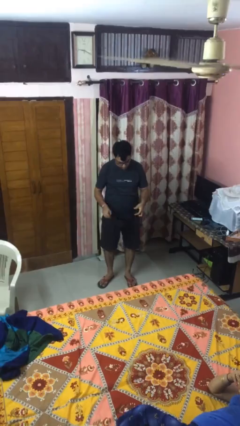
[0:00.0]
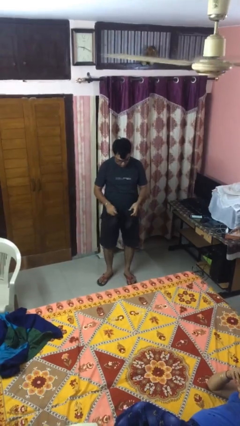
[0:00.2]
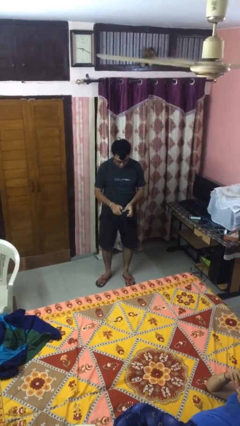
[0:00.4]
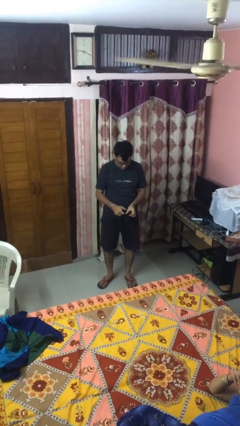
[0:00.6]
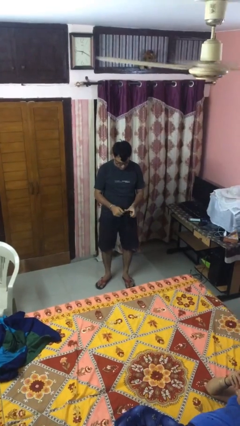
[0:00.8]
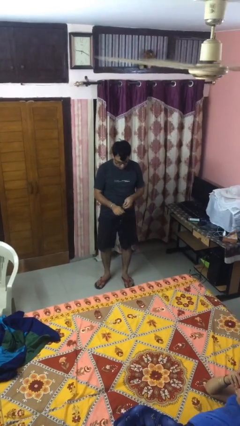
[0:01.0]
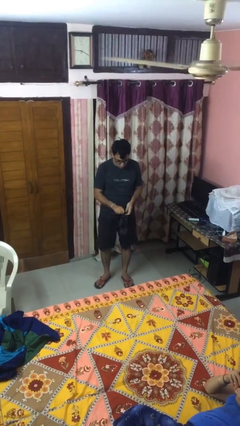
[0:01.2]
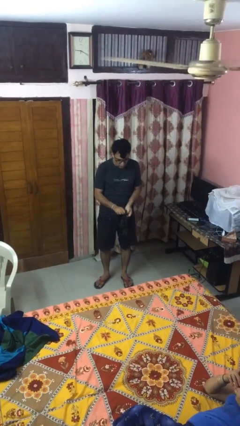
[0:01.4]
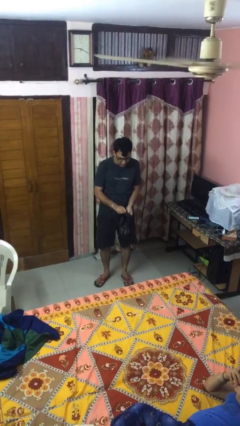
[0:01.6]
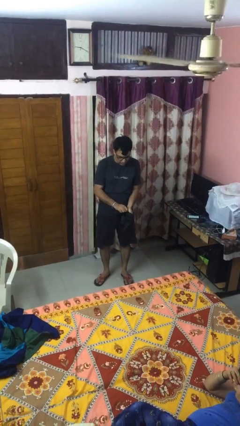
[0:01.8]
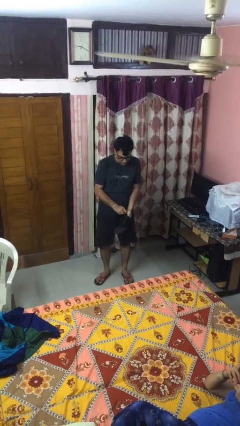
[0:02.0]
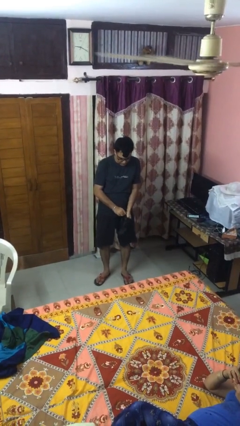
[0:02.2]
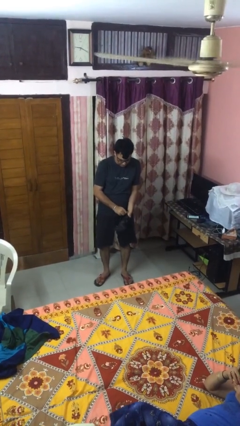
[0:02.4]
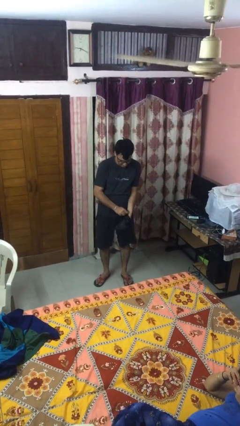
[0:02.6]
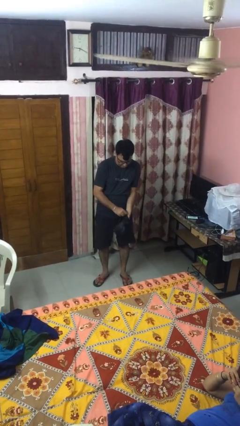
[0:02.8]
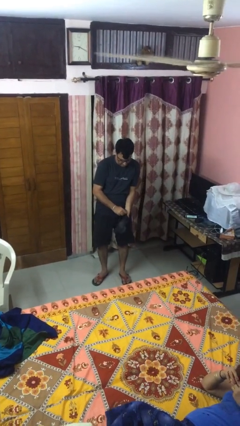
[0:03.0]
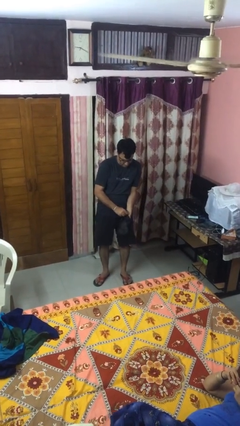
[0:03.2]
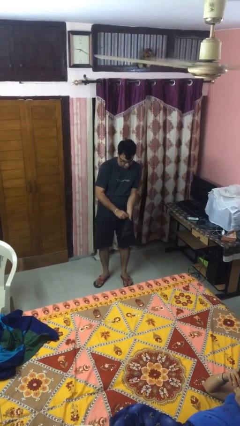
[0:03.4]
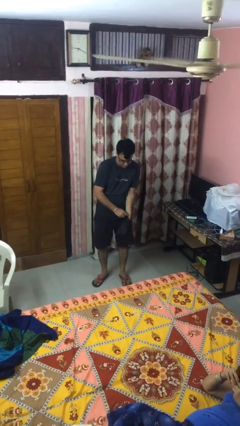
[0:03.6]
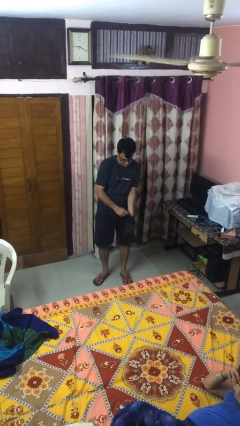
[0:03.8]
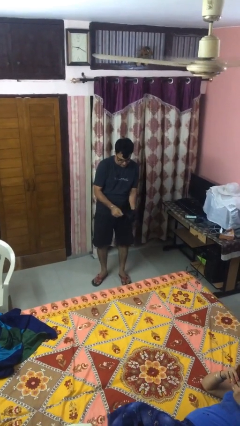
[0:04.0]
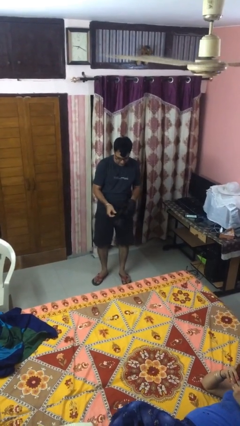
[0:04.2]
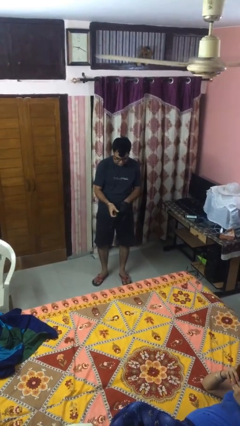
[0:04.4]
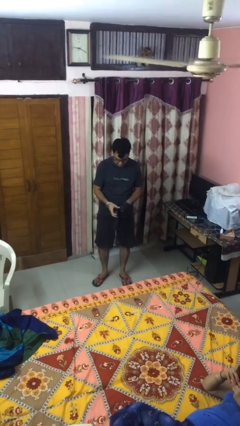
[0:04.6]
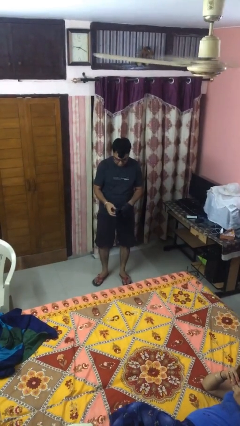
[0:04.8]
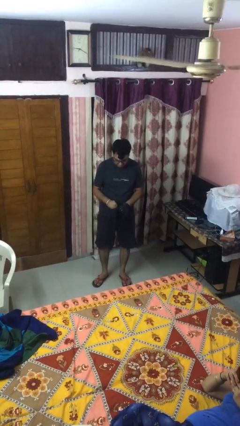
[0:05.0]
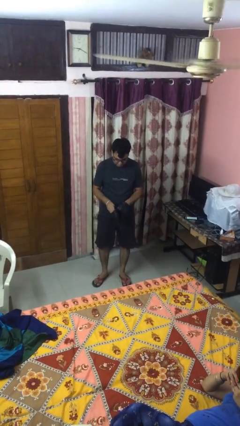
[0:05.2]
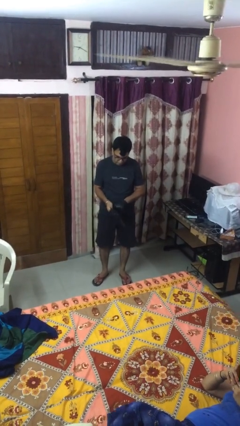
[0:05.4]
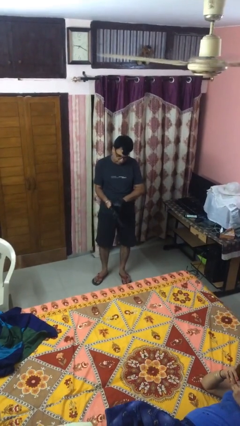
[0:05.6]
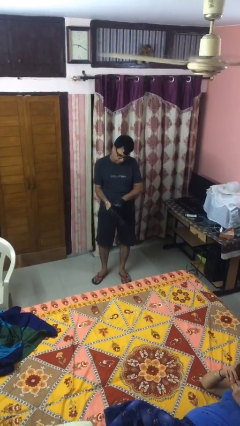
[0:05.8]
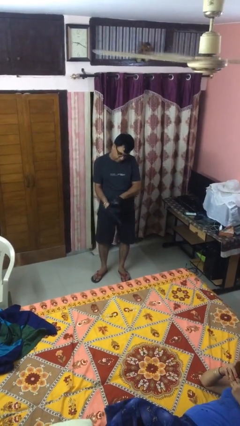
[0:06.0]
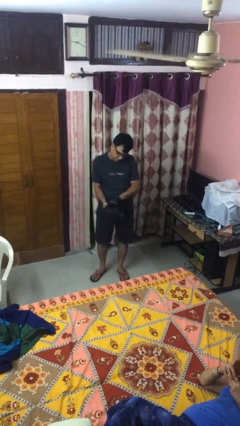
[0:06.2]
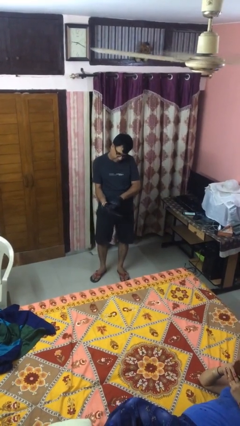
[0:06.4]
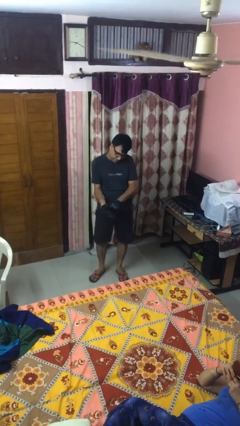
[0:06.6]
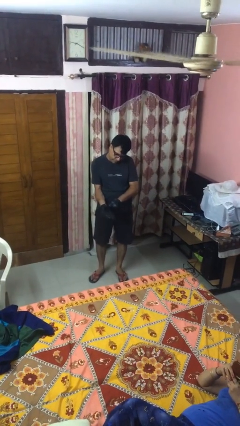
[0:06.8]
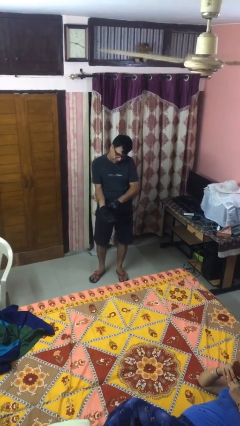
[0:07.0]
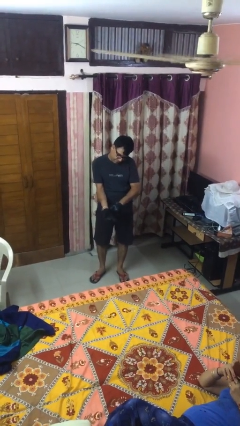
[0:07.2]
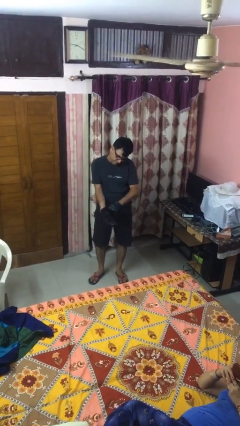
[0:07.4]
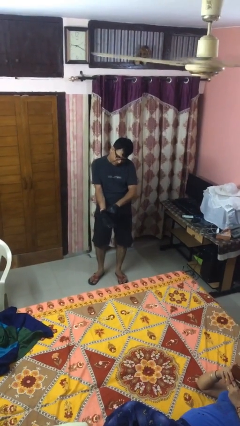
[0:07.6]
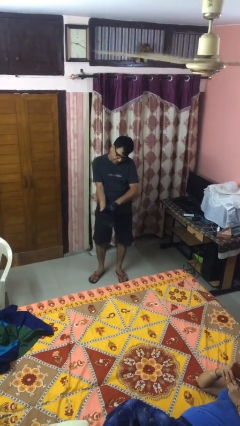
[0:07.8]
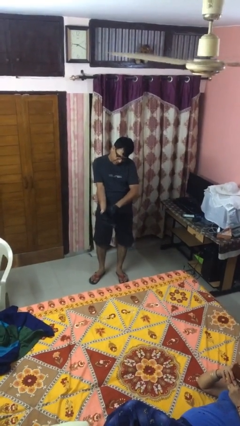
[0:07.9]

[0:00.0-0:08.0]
person puts on gloves

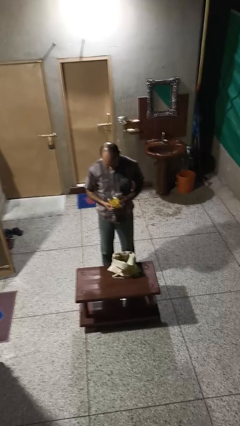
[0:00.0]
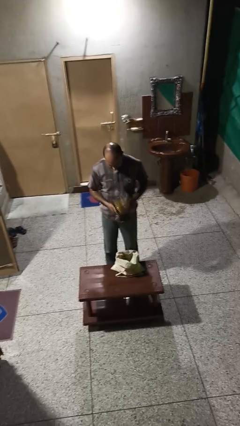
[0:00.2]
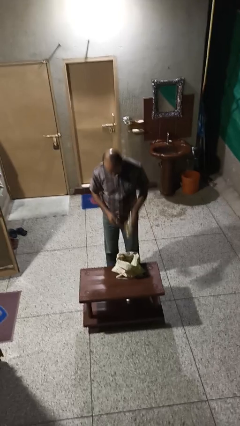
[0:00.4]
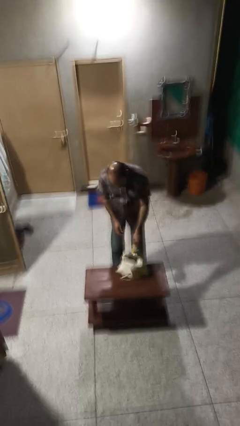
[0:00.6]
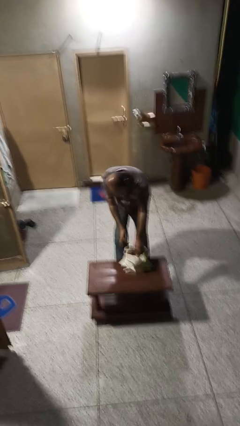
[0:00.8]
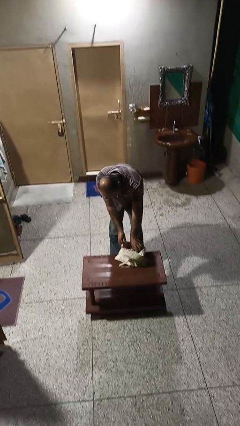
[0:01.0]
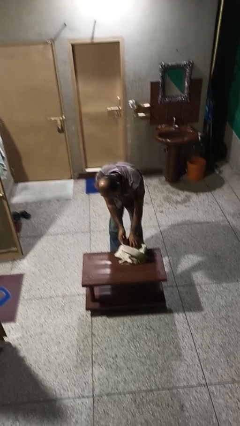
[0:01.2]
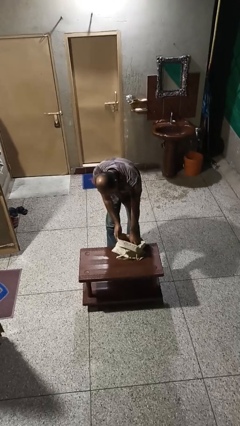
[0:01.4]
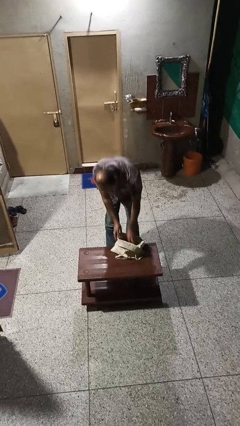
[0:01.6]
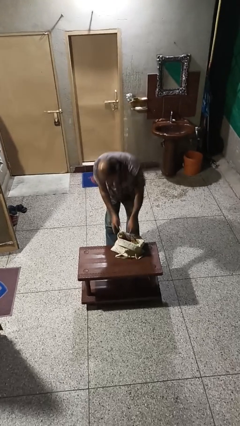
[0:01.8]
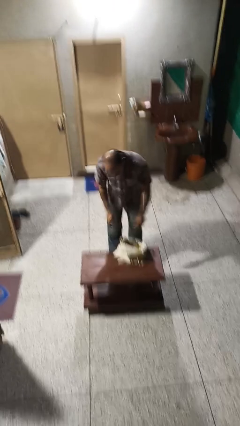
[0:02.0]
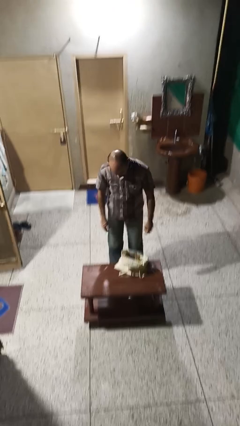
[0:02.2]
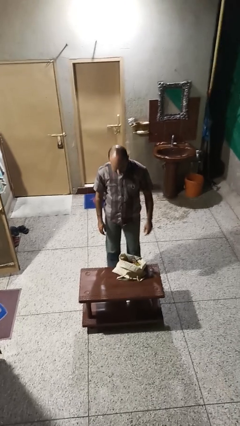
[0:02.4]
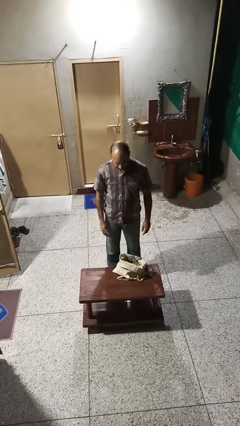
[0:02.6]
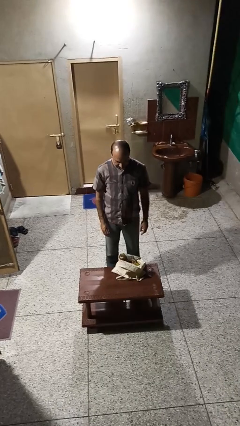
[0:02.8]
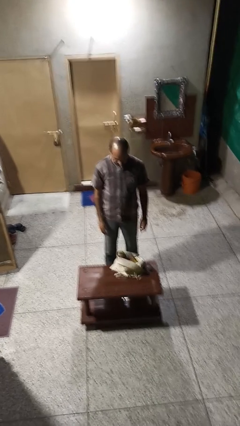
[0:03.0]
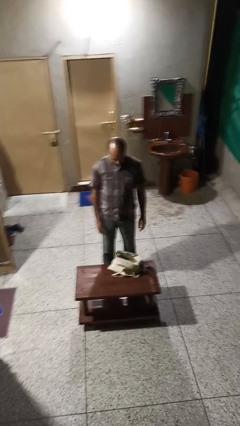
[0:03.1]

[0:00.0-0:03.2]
person puts object into bag

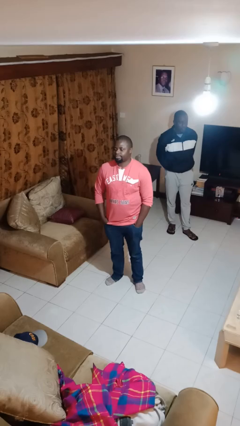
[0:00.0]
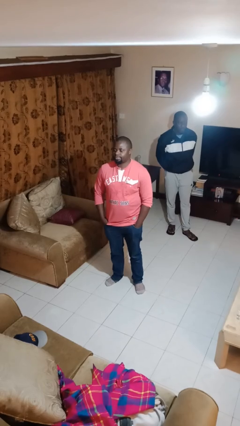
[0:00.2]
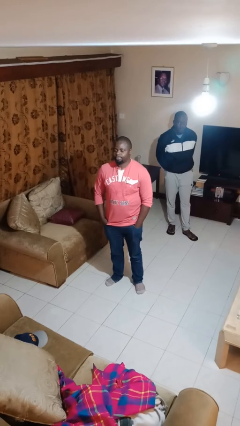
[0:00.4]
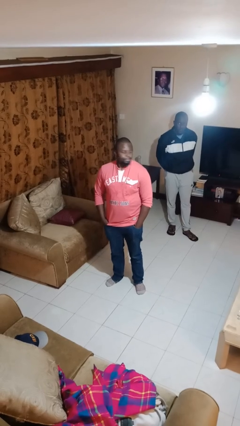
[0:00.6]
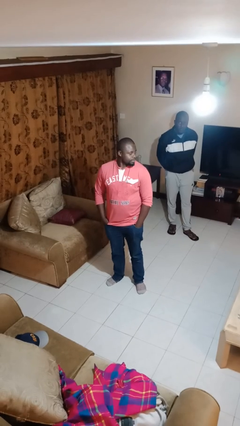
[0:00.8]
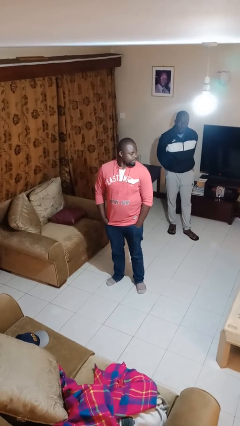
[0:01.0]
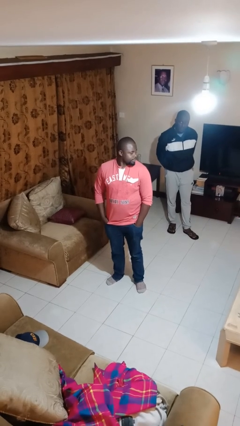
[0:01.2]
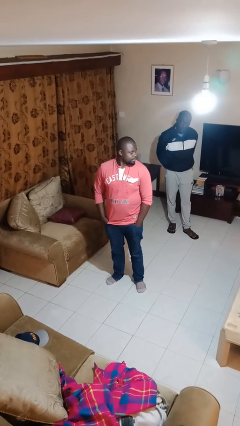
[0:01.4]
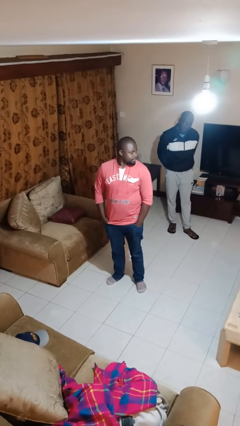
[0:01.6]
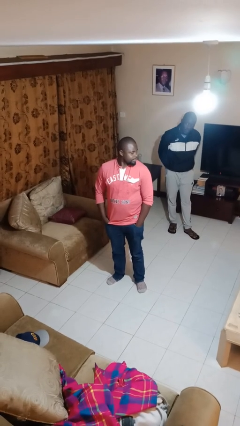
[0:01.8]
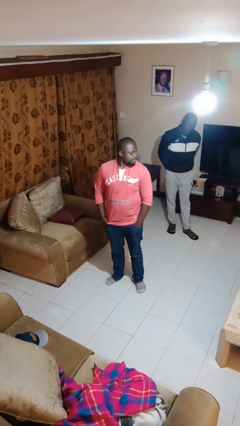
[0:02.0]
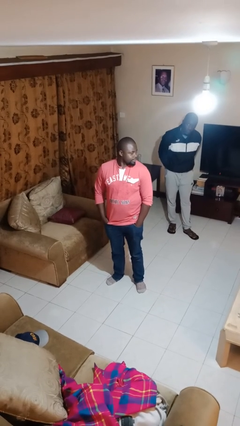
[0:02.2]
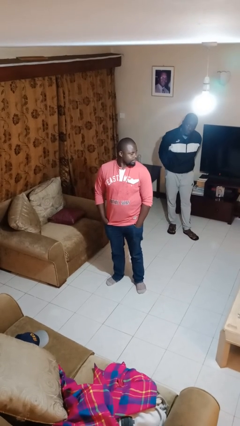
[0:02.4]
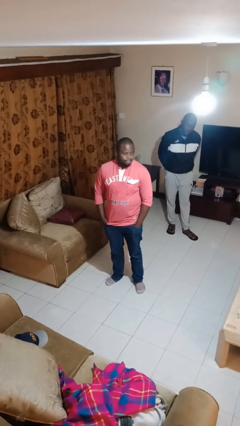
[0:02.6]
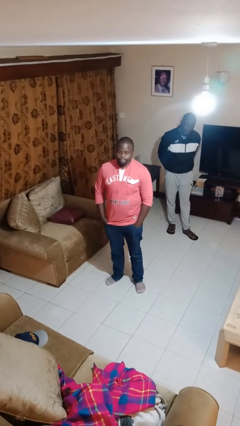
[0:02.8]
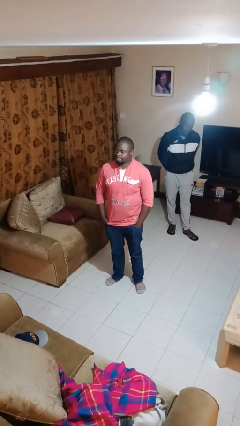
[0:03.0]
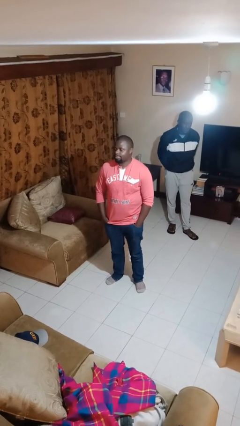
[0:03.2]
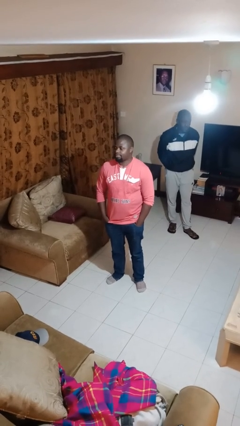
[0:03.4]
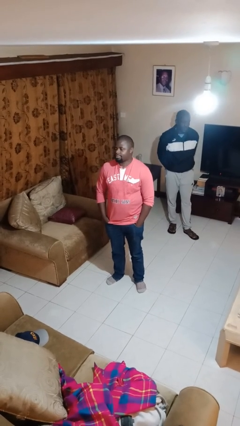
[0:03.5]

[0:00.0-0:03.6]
person looks over shoulder

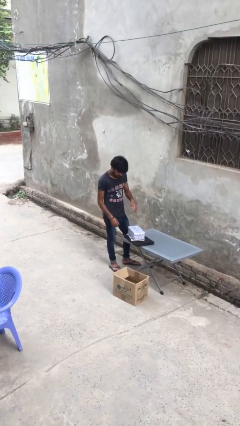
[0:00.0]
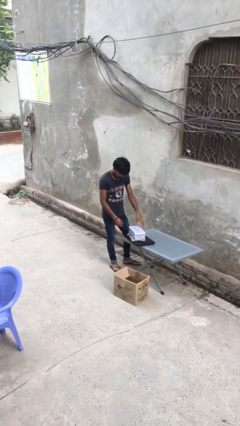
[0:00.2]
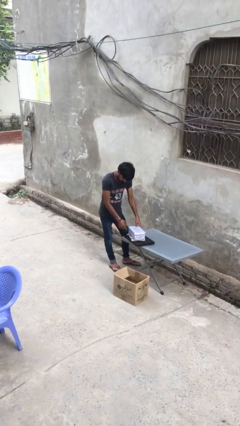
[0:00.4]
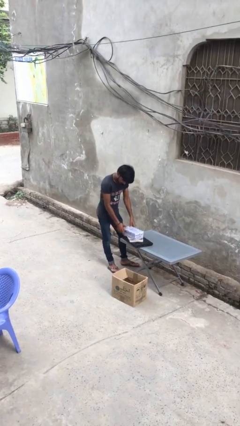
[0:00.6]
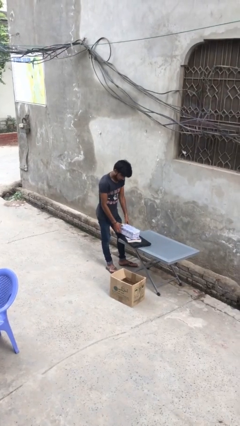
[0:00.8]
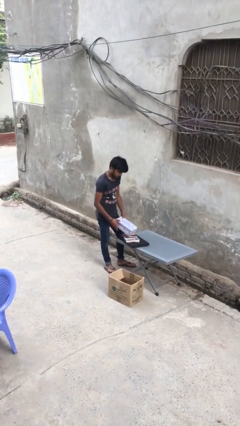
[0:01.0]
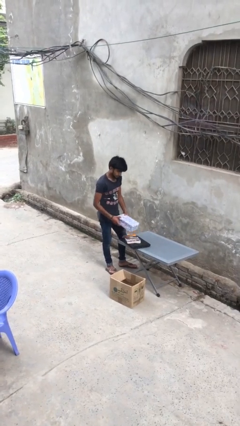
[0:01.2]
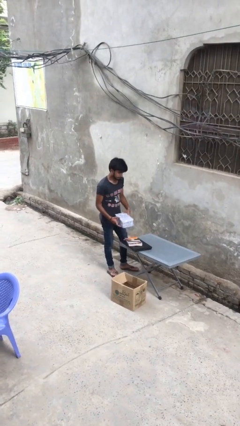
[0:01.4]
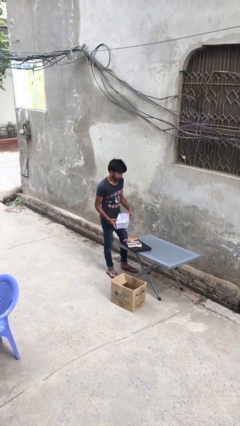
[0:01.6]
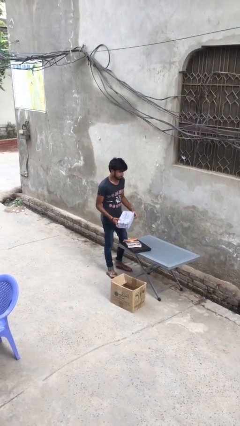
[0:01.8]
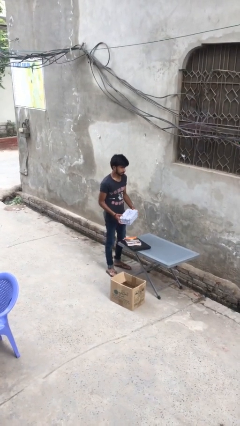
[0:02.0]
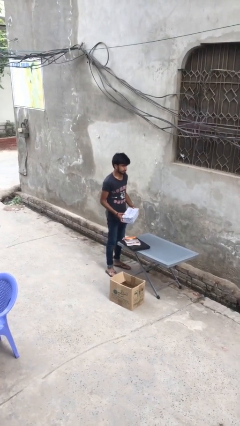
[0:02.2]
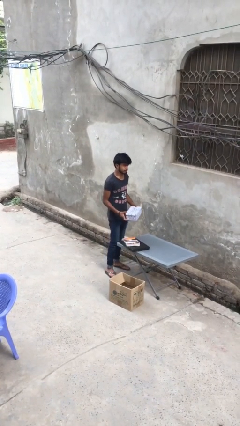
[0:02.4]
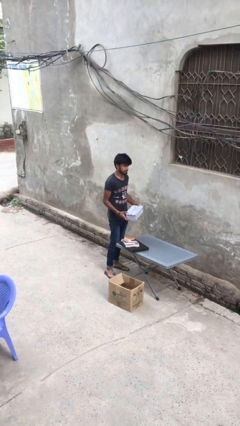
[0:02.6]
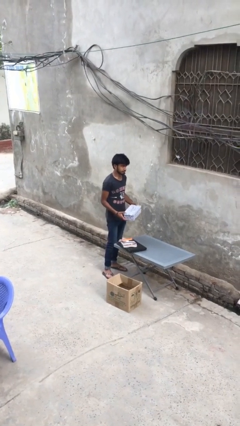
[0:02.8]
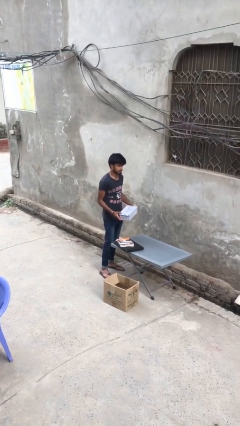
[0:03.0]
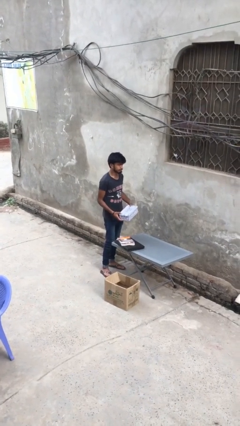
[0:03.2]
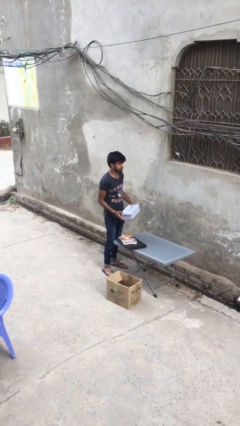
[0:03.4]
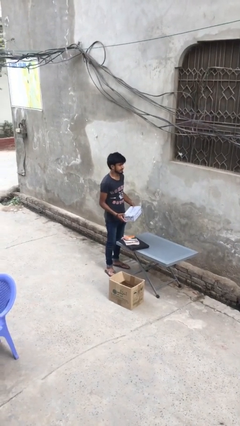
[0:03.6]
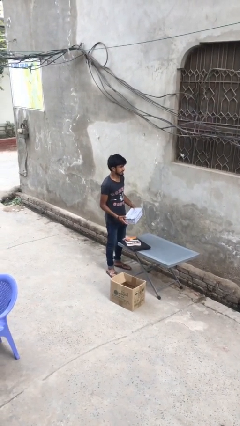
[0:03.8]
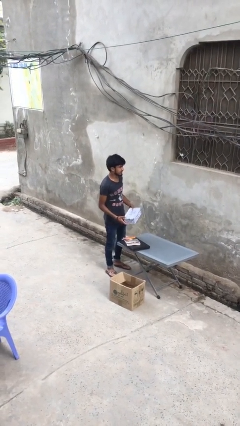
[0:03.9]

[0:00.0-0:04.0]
person picks up object from table
